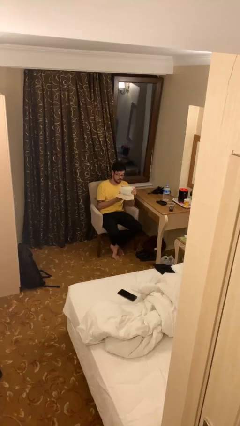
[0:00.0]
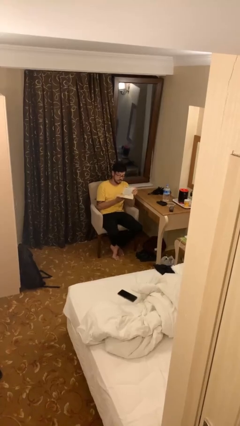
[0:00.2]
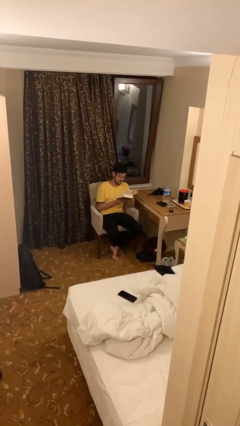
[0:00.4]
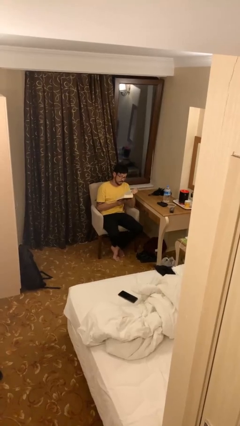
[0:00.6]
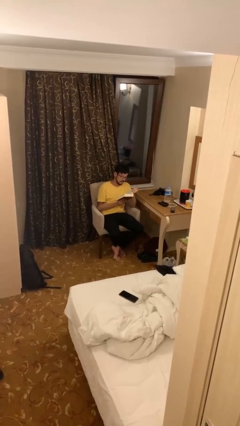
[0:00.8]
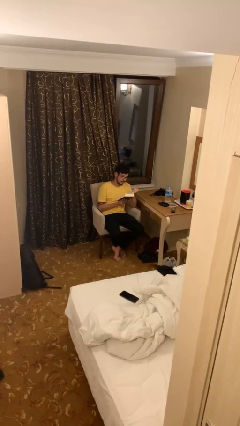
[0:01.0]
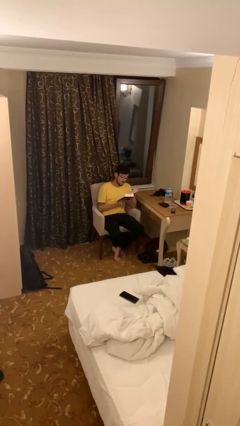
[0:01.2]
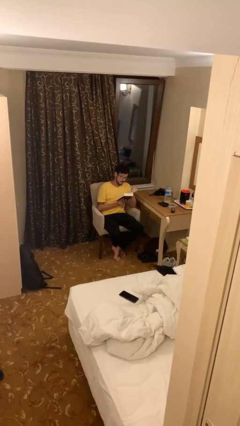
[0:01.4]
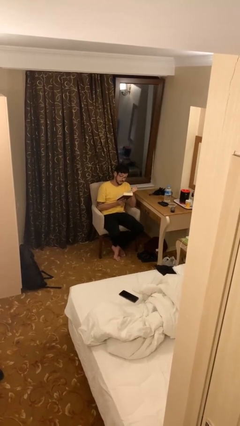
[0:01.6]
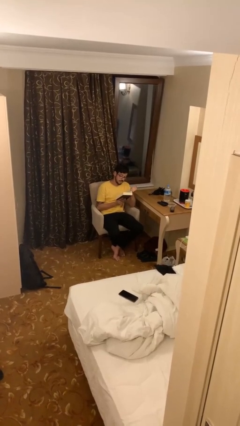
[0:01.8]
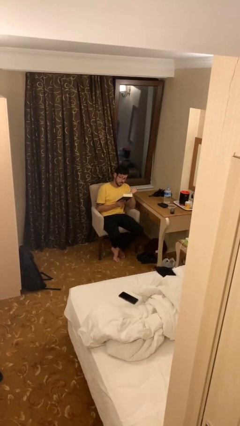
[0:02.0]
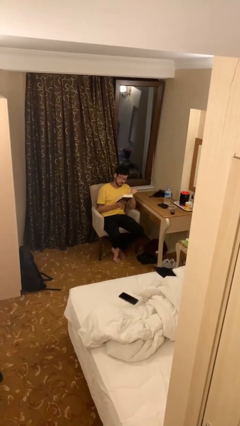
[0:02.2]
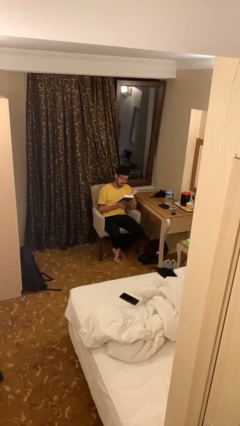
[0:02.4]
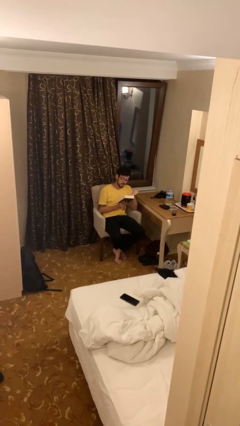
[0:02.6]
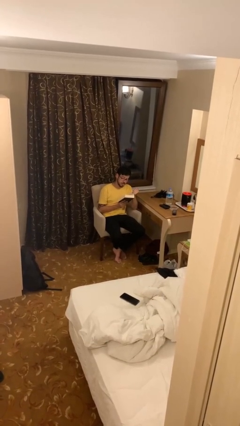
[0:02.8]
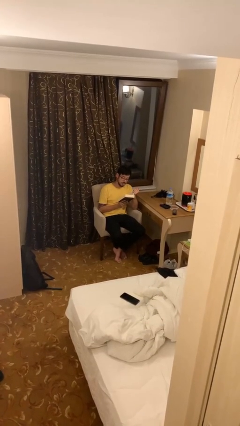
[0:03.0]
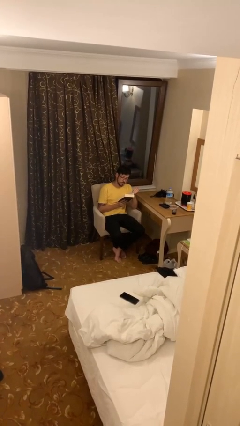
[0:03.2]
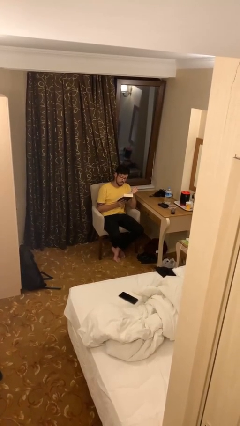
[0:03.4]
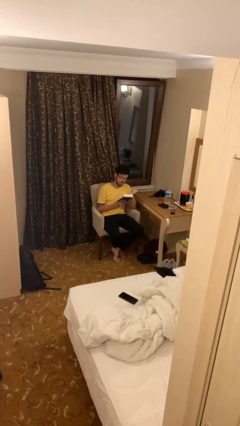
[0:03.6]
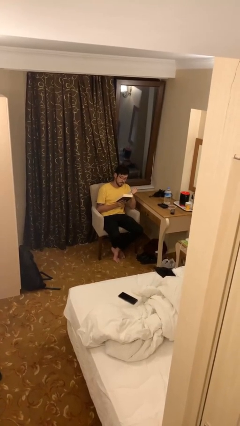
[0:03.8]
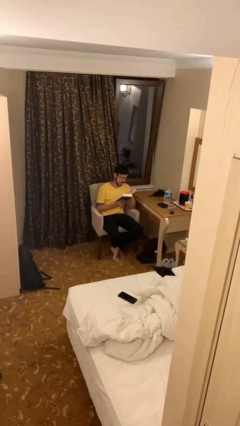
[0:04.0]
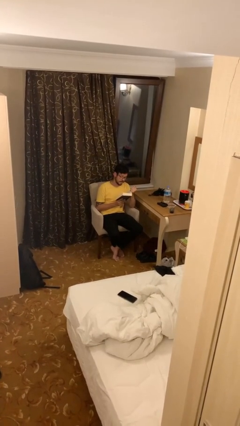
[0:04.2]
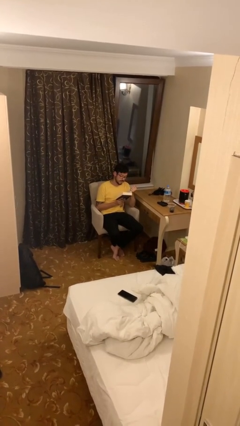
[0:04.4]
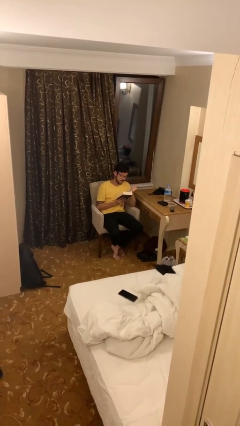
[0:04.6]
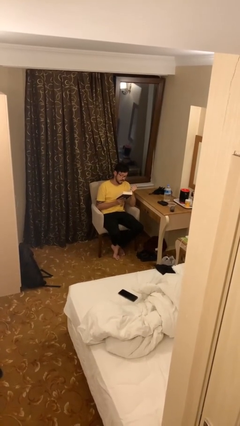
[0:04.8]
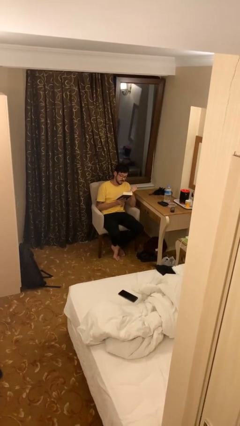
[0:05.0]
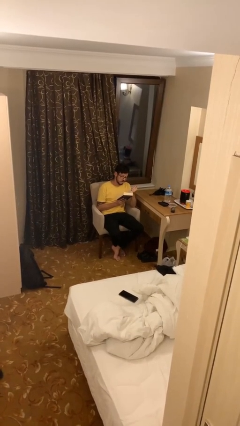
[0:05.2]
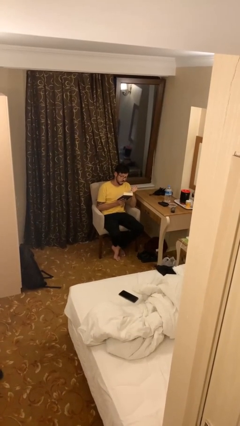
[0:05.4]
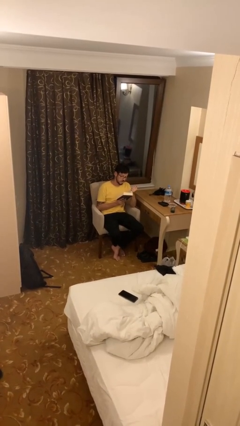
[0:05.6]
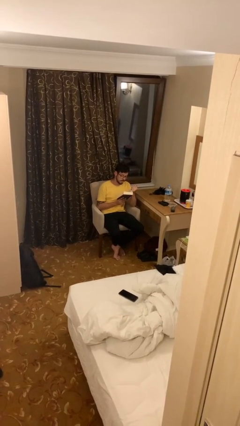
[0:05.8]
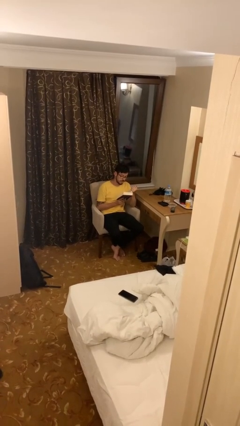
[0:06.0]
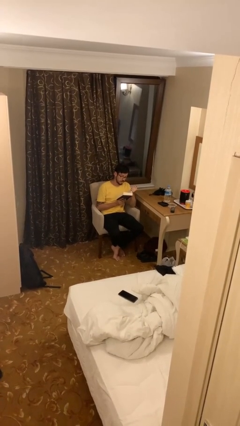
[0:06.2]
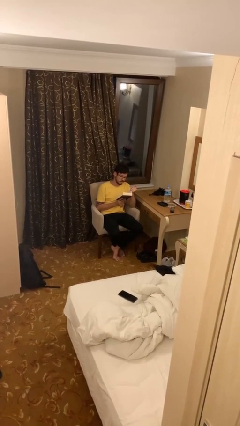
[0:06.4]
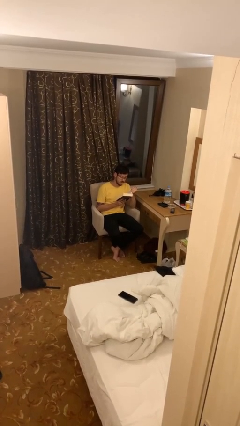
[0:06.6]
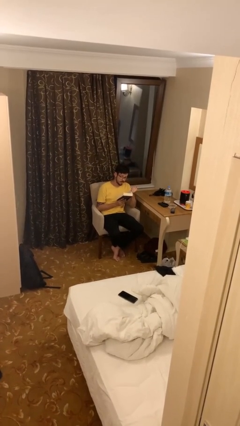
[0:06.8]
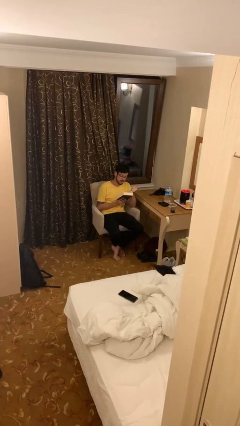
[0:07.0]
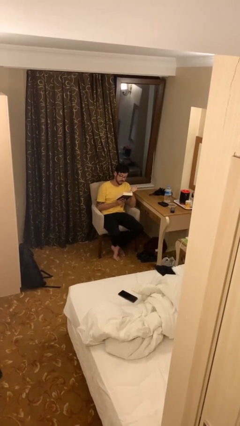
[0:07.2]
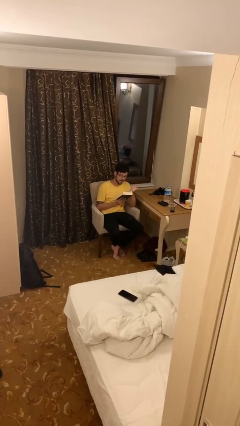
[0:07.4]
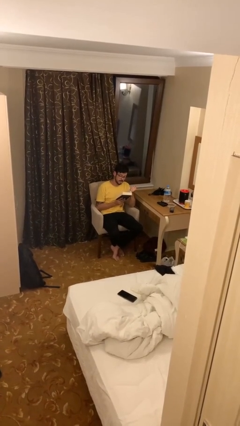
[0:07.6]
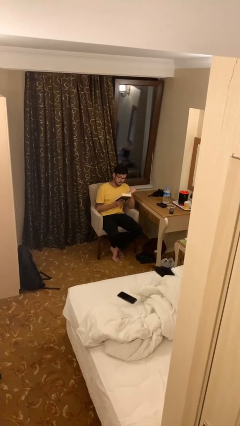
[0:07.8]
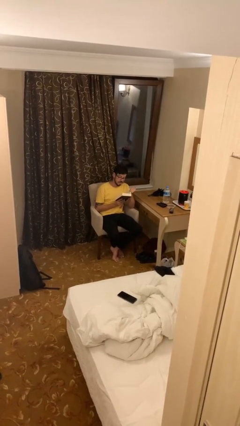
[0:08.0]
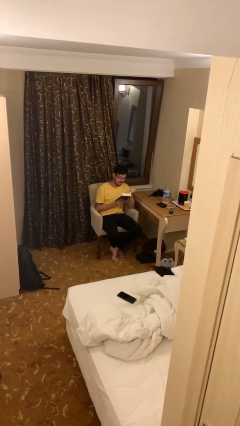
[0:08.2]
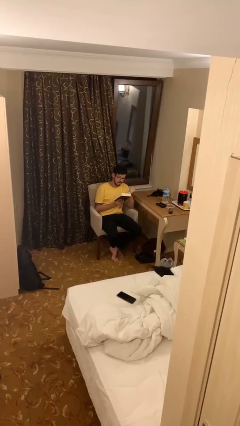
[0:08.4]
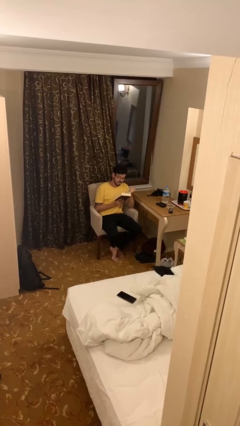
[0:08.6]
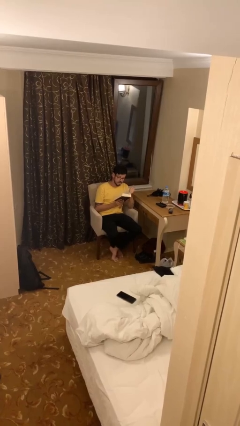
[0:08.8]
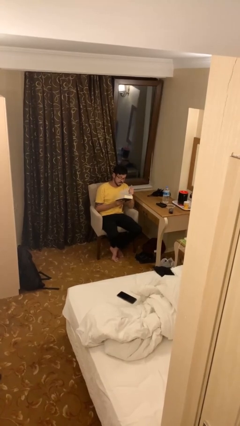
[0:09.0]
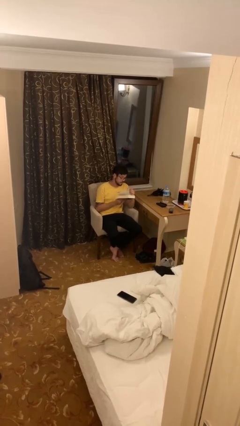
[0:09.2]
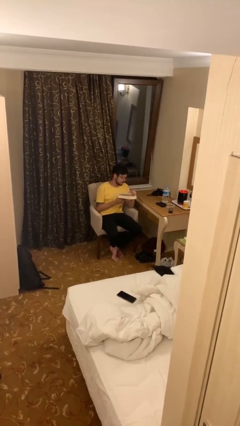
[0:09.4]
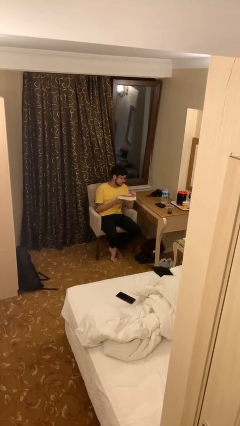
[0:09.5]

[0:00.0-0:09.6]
person reads document

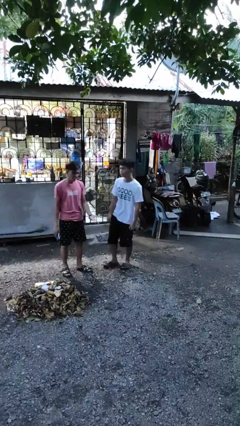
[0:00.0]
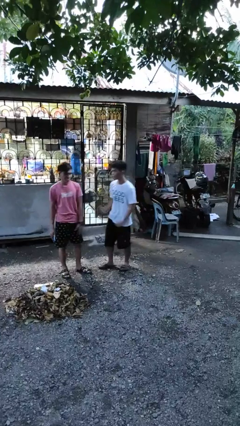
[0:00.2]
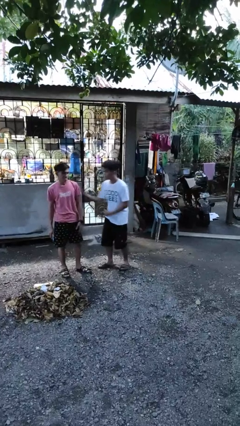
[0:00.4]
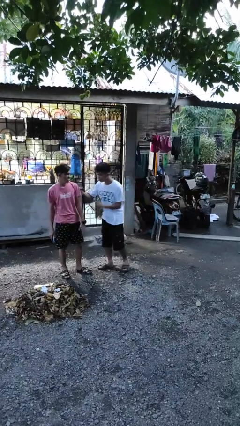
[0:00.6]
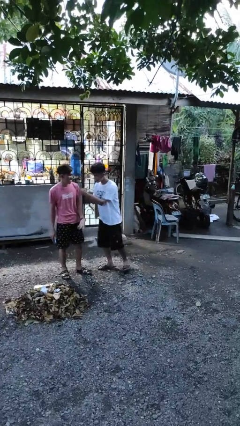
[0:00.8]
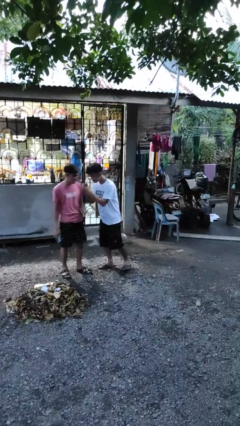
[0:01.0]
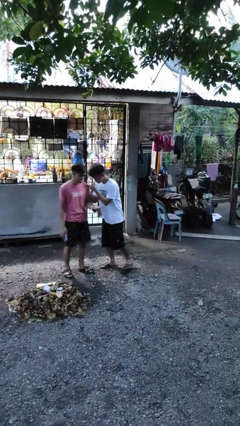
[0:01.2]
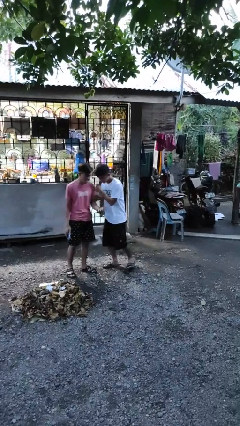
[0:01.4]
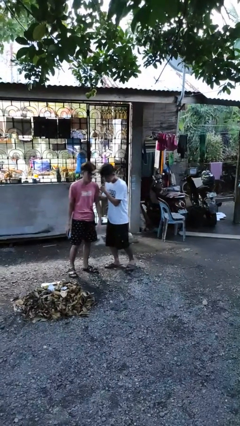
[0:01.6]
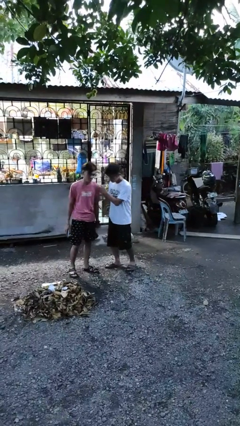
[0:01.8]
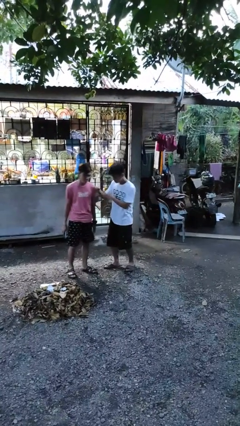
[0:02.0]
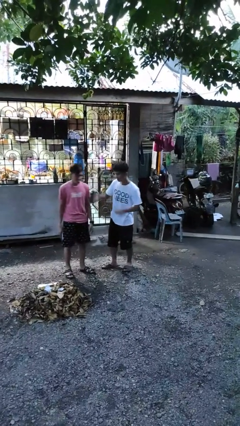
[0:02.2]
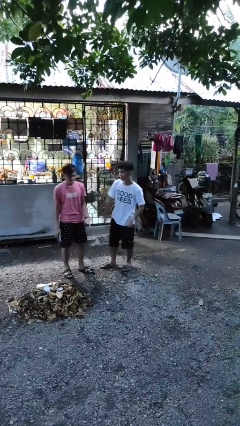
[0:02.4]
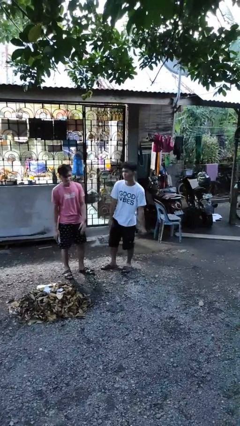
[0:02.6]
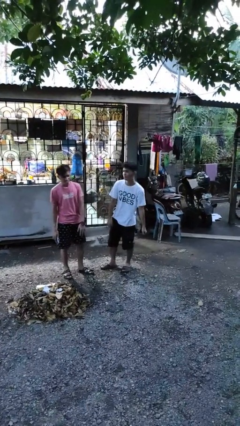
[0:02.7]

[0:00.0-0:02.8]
person pounds shoulders of person

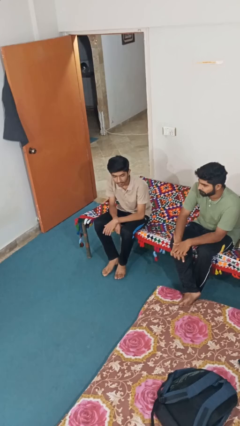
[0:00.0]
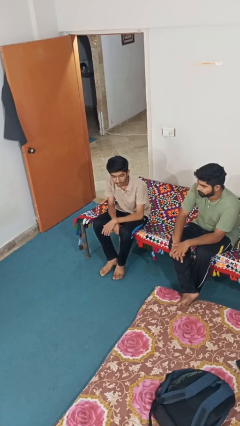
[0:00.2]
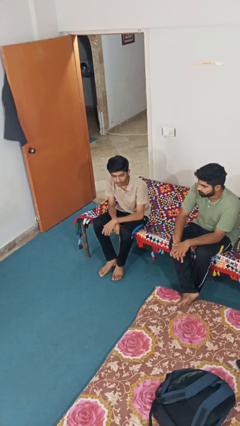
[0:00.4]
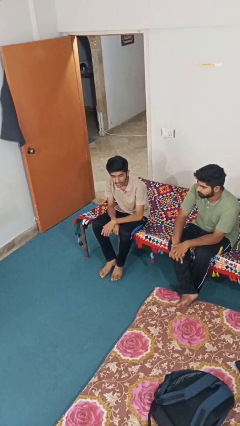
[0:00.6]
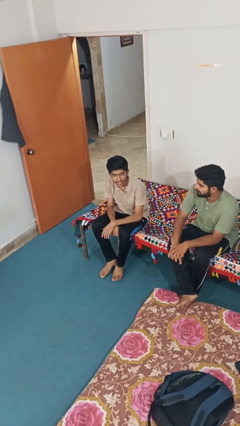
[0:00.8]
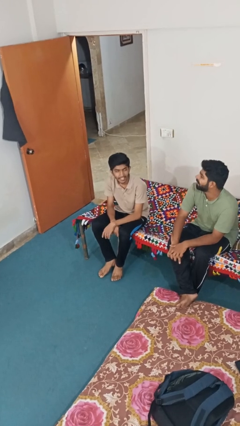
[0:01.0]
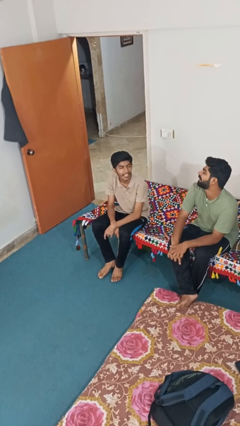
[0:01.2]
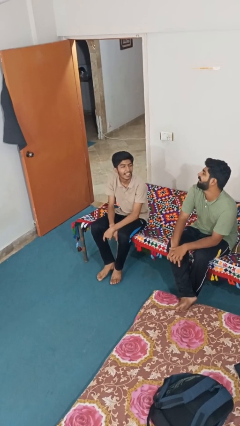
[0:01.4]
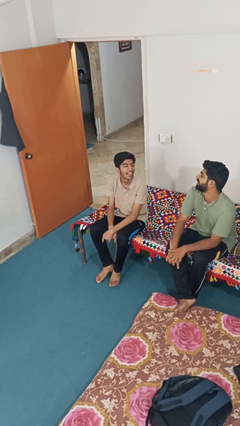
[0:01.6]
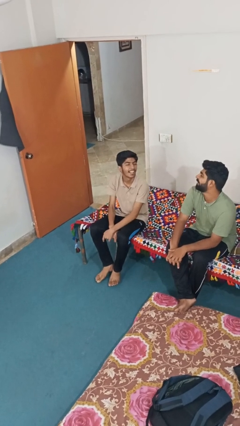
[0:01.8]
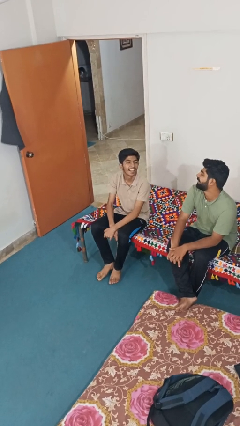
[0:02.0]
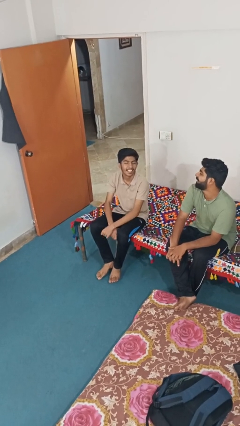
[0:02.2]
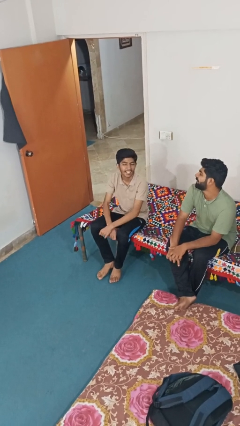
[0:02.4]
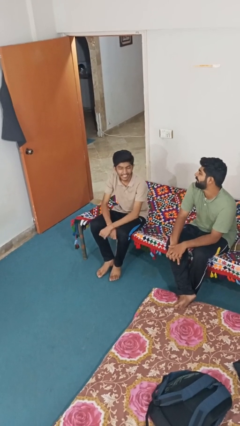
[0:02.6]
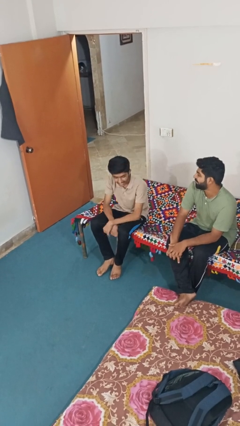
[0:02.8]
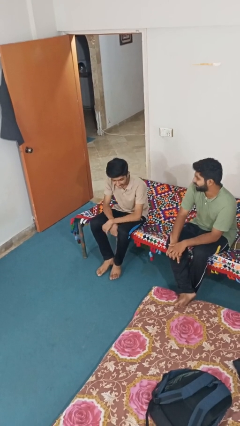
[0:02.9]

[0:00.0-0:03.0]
person laughs with person

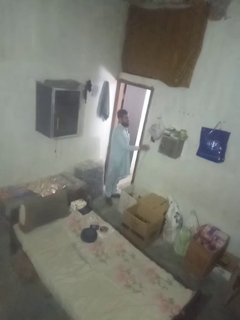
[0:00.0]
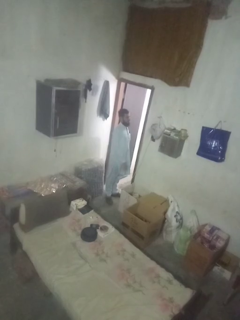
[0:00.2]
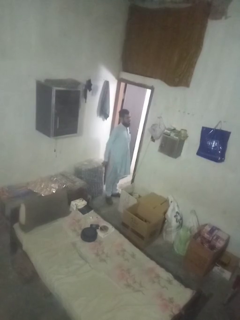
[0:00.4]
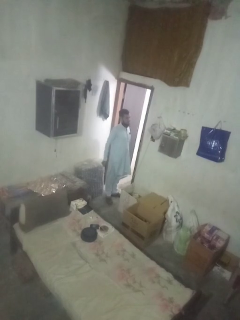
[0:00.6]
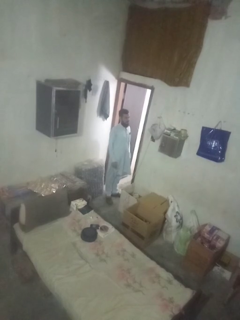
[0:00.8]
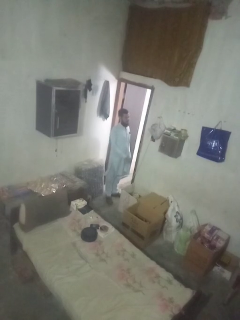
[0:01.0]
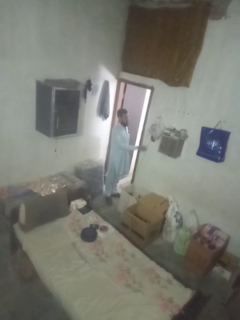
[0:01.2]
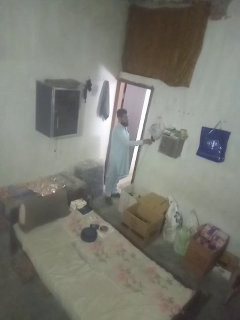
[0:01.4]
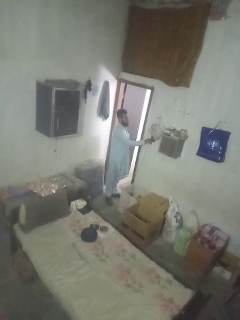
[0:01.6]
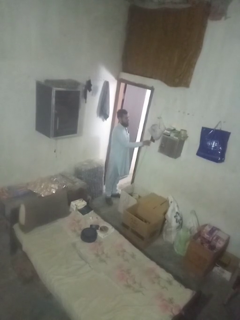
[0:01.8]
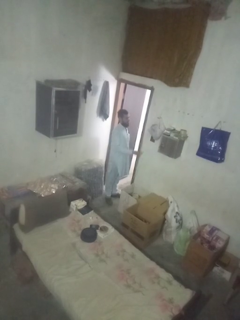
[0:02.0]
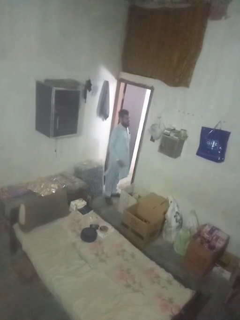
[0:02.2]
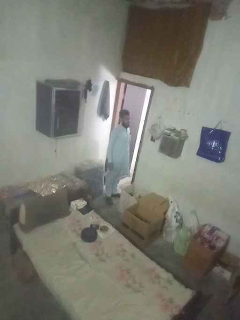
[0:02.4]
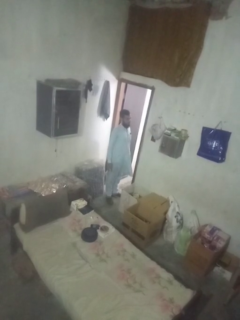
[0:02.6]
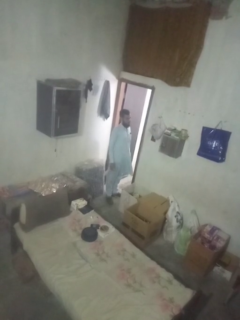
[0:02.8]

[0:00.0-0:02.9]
person unplugs from electrical socket

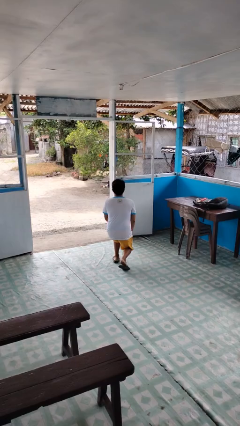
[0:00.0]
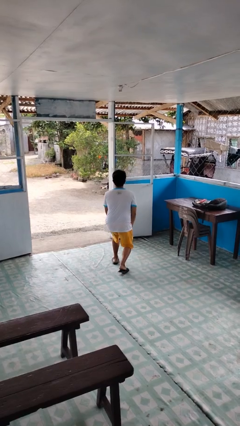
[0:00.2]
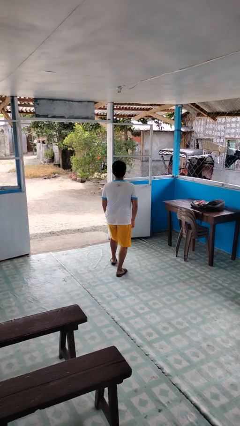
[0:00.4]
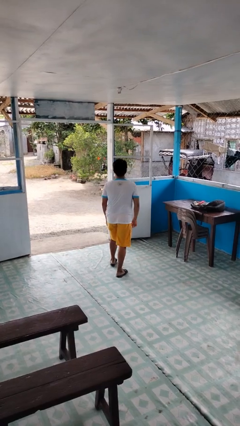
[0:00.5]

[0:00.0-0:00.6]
person stands up from floor
